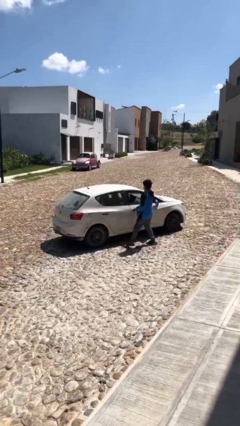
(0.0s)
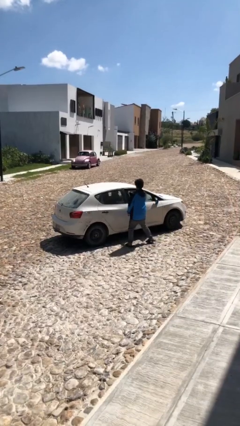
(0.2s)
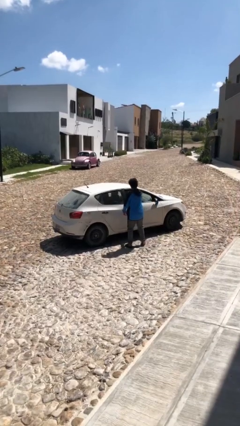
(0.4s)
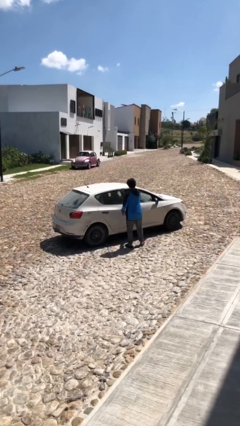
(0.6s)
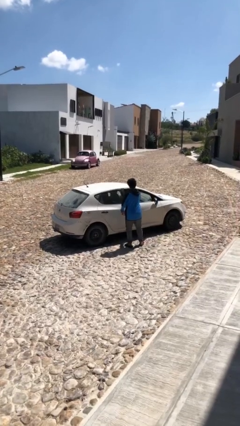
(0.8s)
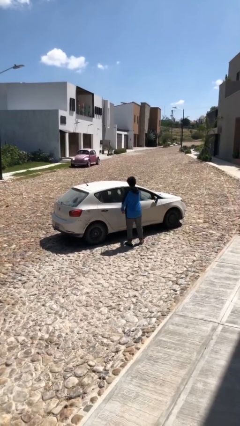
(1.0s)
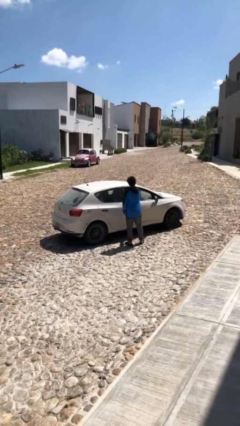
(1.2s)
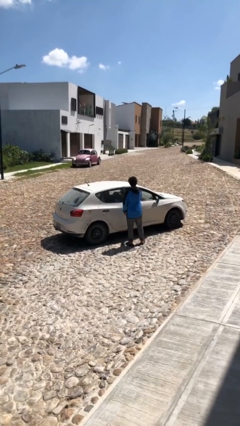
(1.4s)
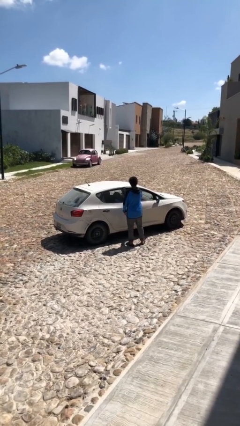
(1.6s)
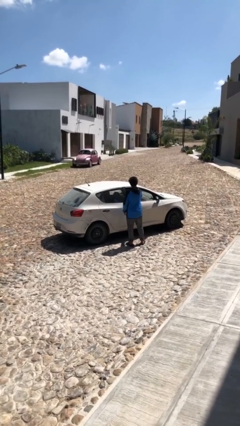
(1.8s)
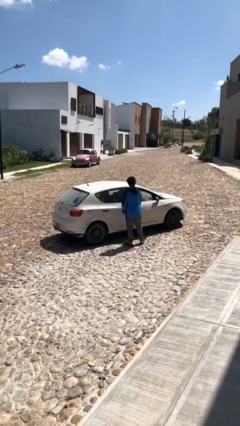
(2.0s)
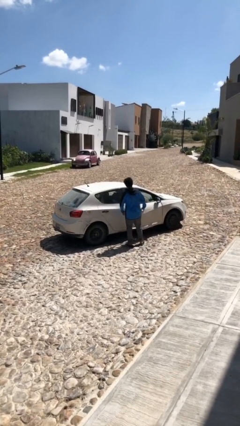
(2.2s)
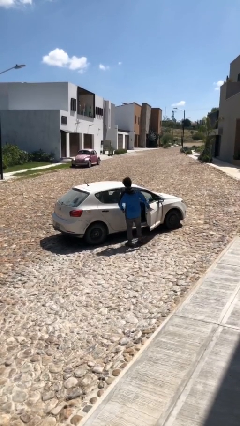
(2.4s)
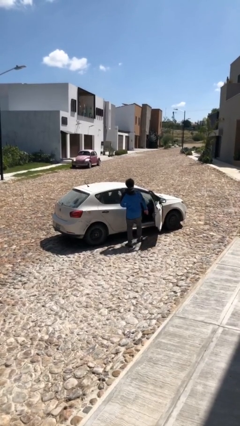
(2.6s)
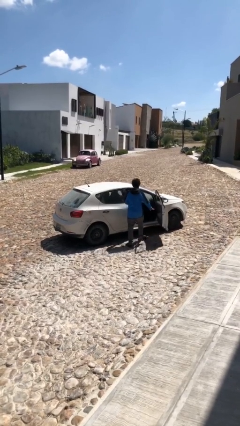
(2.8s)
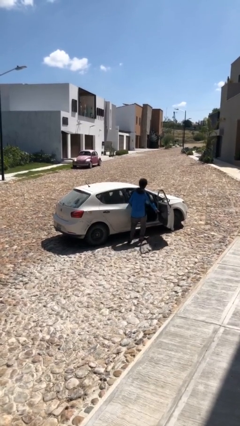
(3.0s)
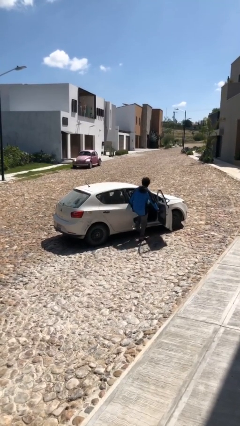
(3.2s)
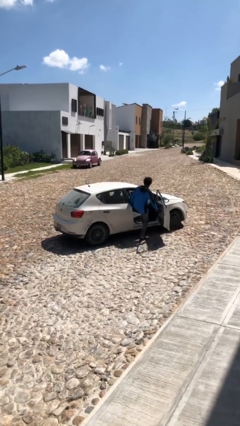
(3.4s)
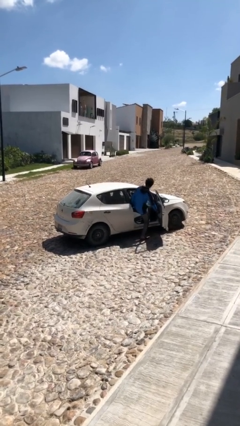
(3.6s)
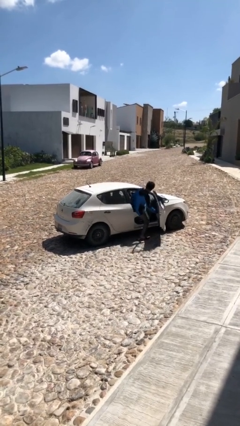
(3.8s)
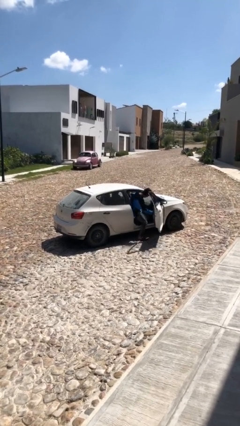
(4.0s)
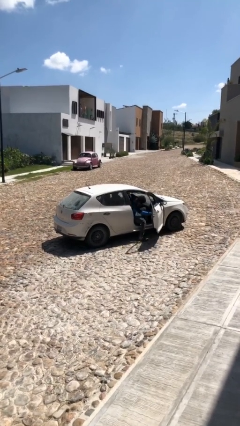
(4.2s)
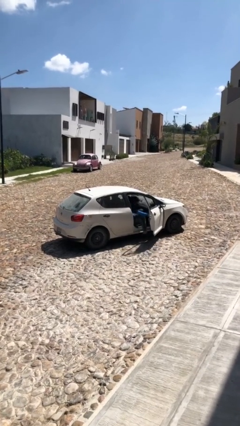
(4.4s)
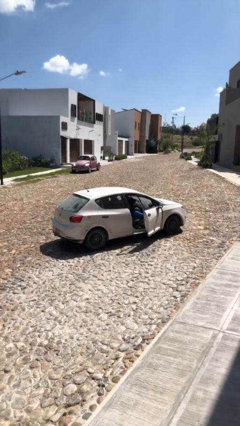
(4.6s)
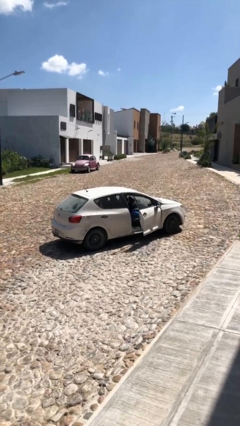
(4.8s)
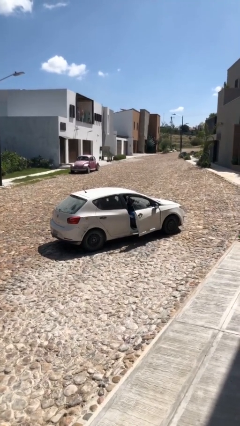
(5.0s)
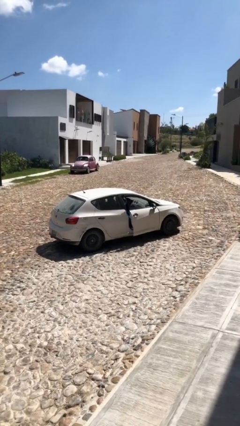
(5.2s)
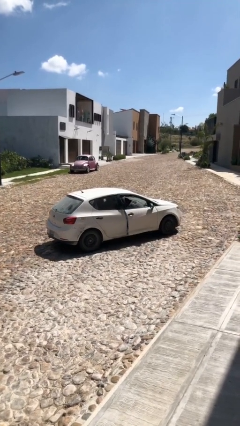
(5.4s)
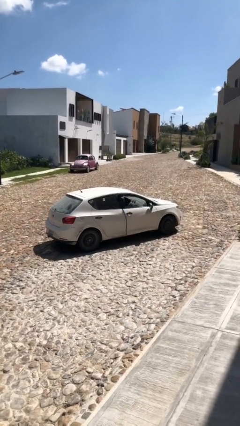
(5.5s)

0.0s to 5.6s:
car picks up person

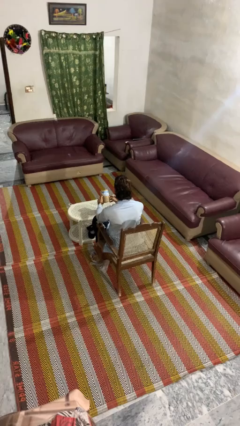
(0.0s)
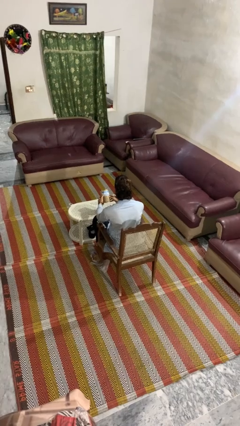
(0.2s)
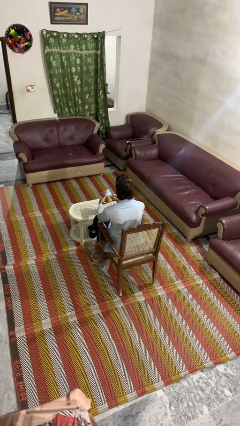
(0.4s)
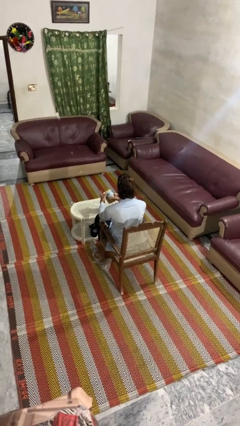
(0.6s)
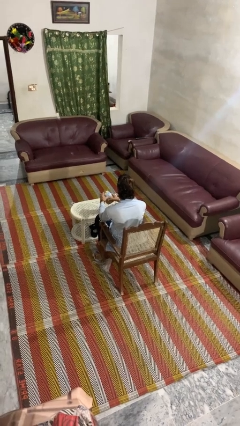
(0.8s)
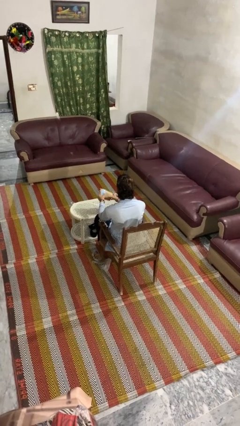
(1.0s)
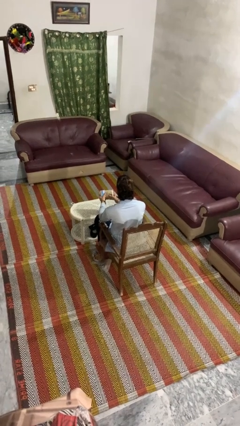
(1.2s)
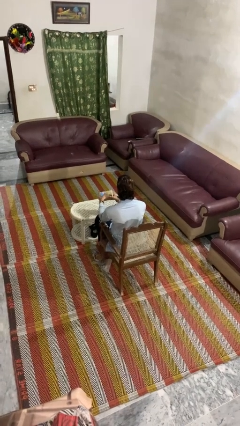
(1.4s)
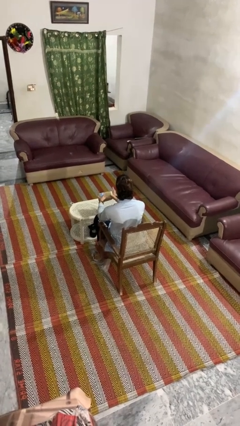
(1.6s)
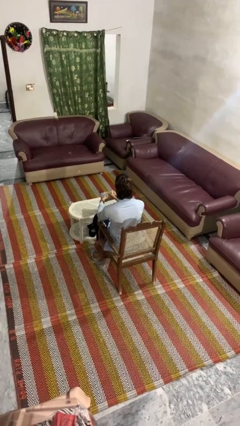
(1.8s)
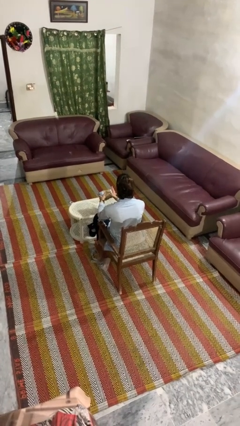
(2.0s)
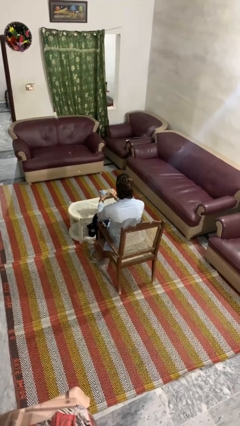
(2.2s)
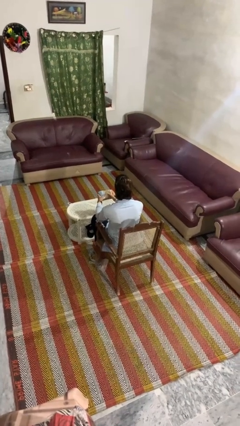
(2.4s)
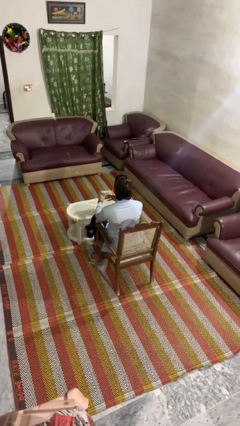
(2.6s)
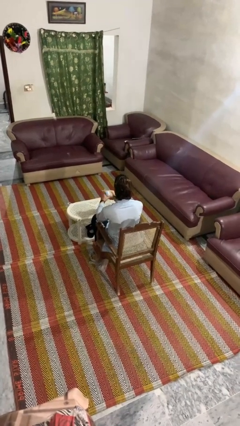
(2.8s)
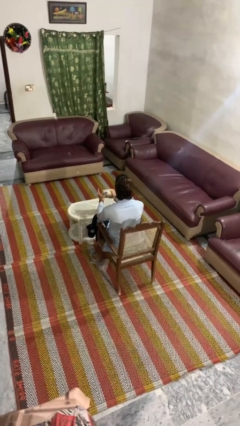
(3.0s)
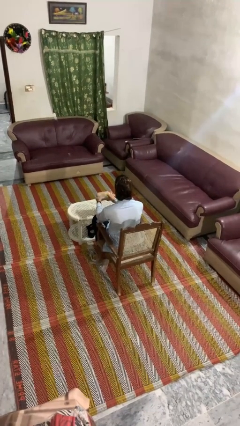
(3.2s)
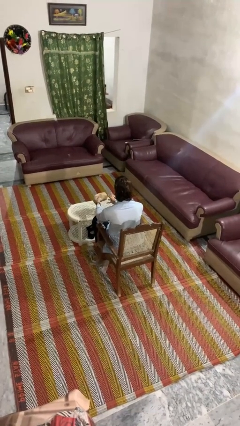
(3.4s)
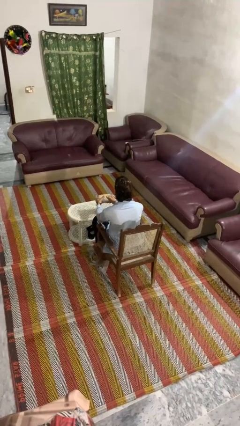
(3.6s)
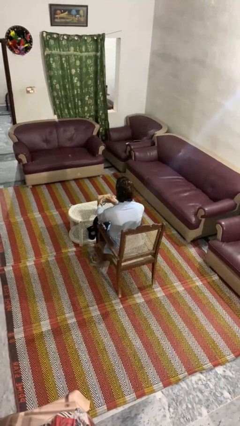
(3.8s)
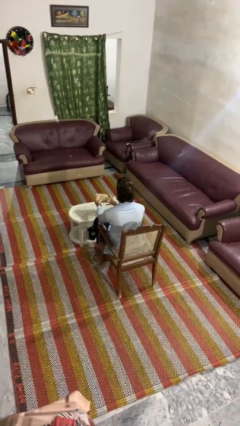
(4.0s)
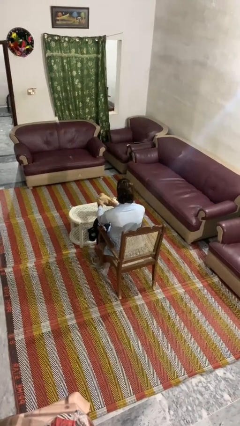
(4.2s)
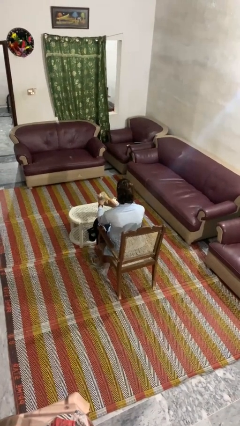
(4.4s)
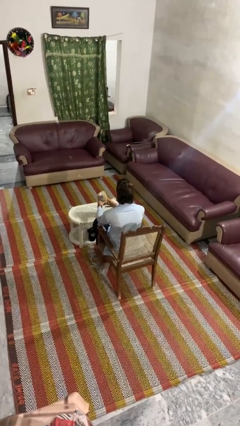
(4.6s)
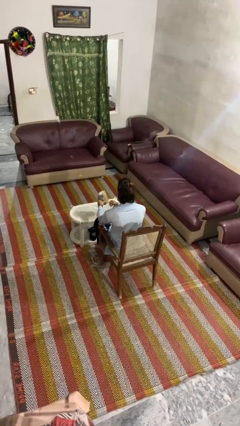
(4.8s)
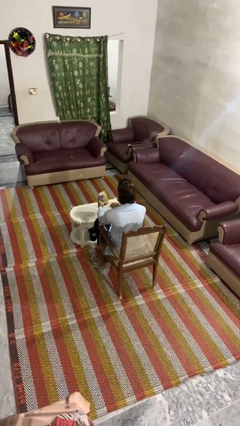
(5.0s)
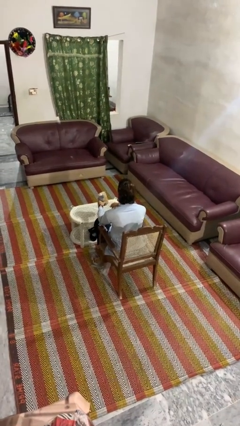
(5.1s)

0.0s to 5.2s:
person squeezes object

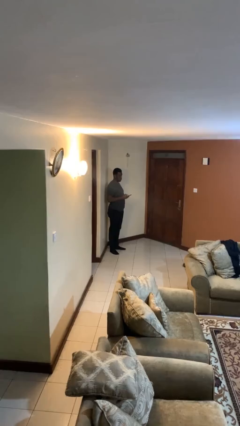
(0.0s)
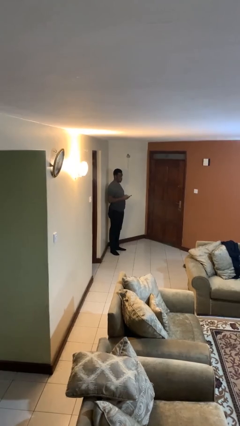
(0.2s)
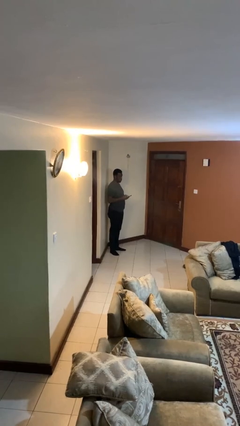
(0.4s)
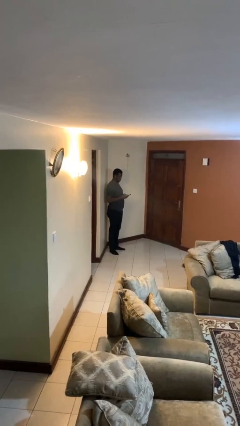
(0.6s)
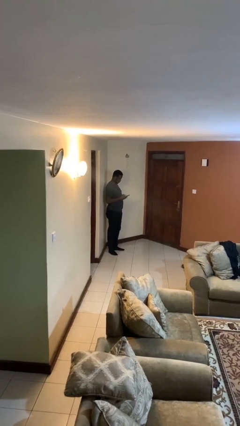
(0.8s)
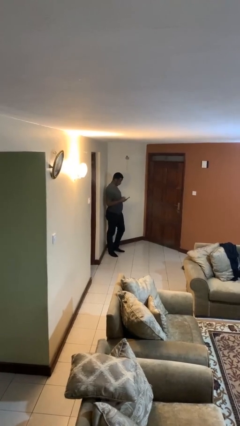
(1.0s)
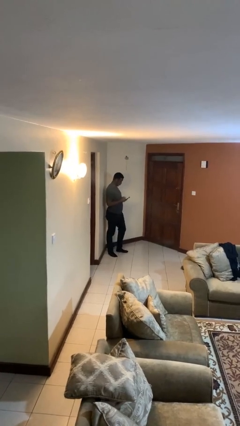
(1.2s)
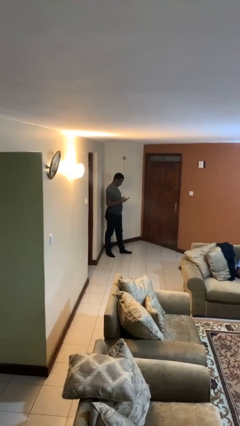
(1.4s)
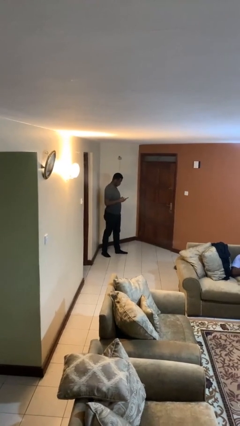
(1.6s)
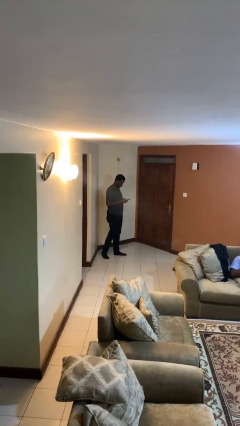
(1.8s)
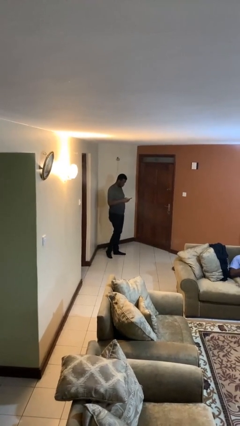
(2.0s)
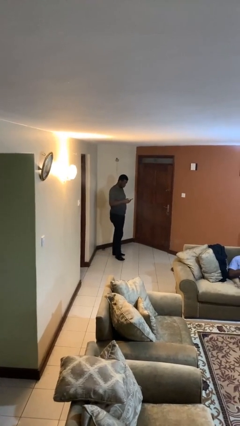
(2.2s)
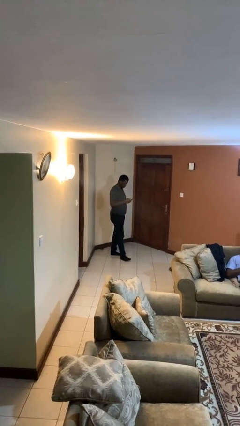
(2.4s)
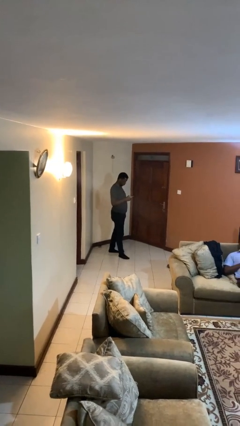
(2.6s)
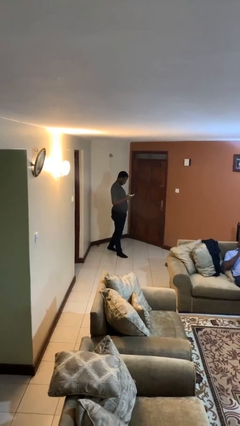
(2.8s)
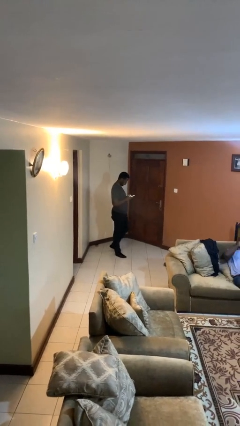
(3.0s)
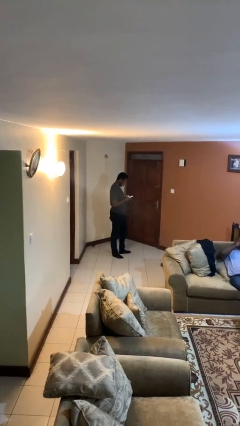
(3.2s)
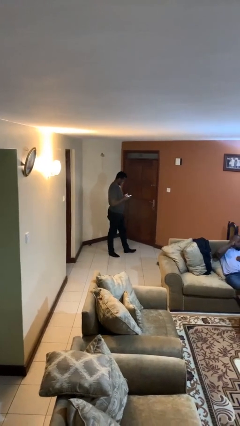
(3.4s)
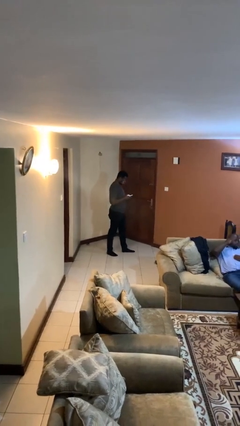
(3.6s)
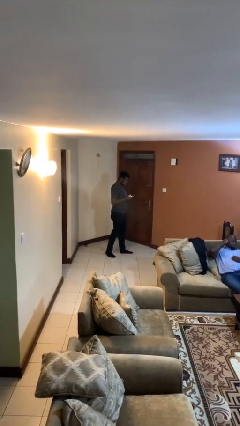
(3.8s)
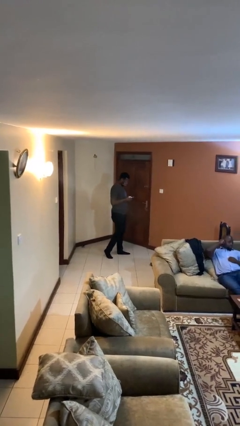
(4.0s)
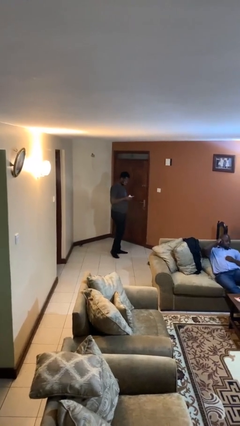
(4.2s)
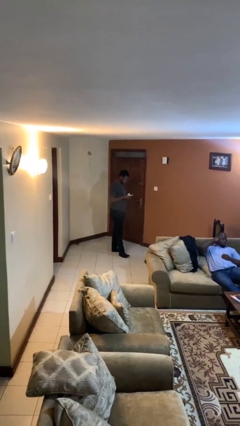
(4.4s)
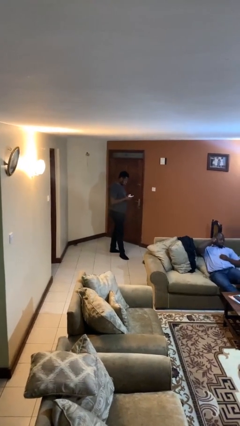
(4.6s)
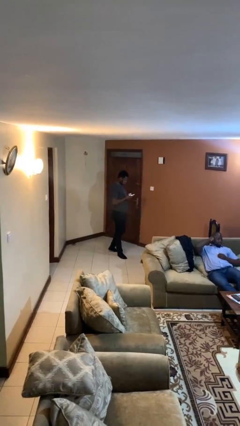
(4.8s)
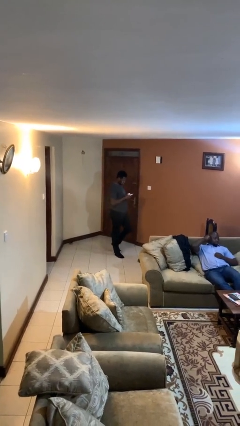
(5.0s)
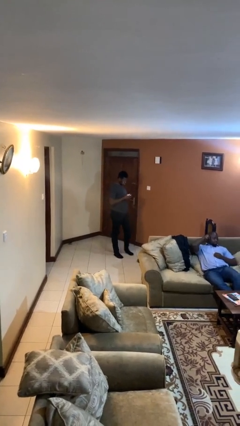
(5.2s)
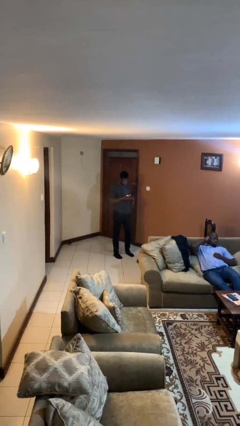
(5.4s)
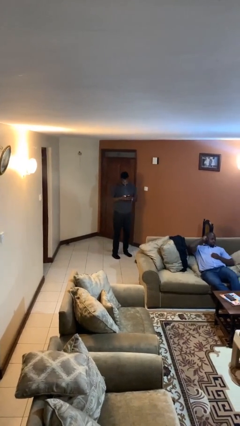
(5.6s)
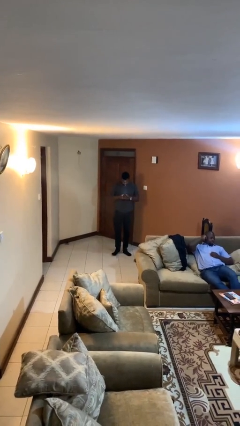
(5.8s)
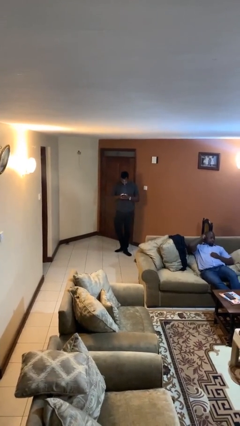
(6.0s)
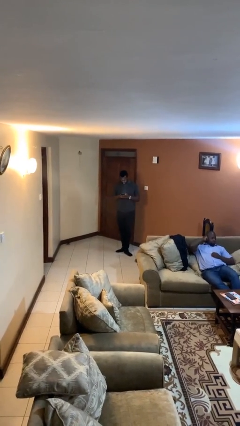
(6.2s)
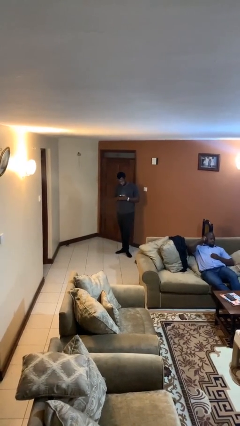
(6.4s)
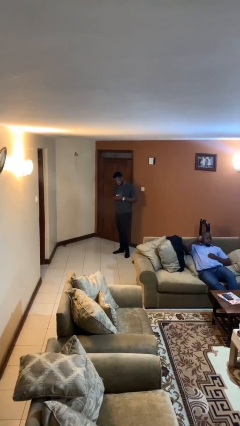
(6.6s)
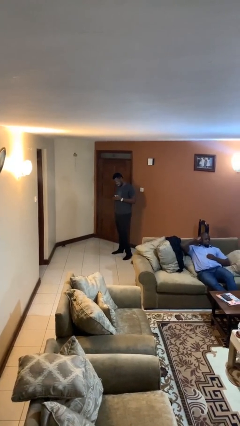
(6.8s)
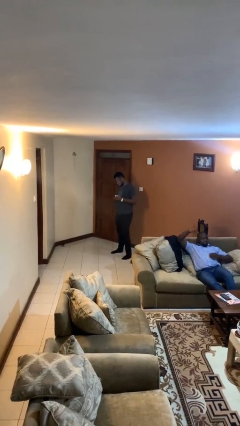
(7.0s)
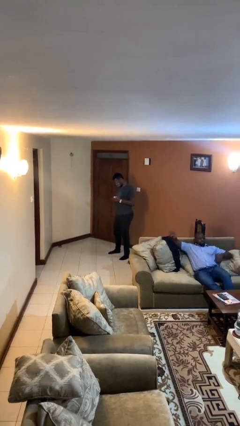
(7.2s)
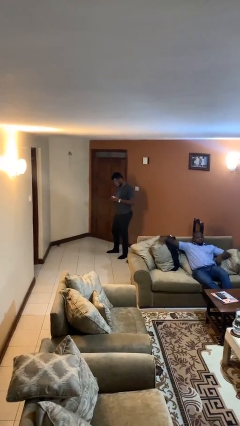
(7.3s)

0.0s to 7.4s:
person texts on phone
